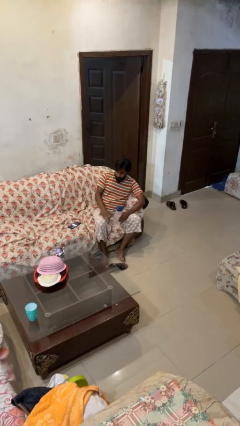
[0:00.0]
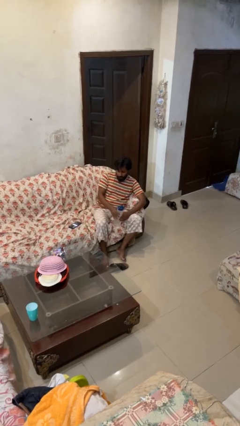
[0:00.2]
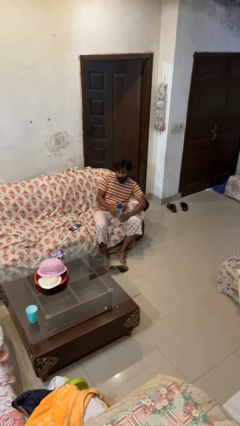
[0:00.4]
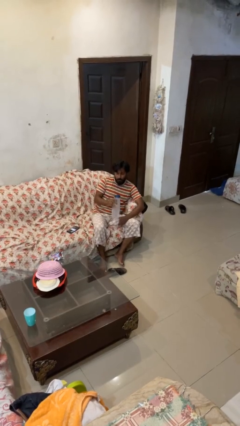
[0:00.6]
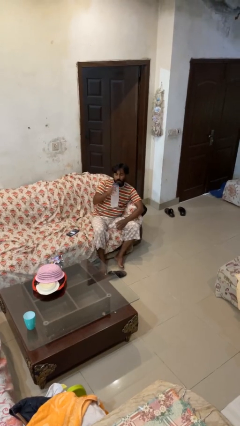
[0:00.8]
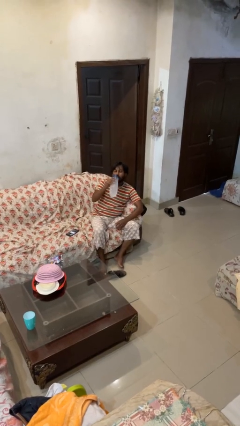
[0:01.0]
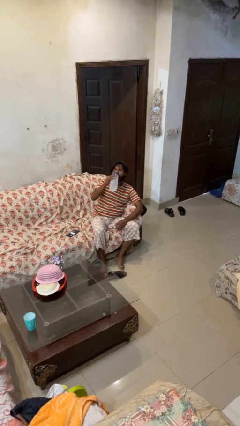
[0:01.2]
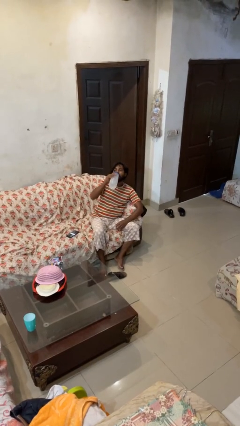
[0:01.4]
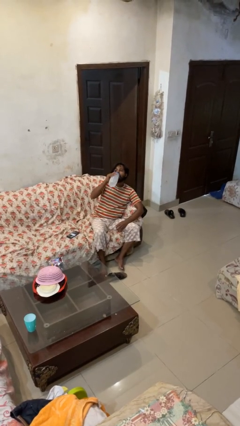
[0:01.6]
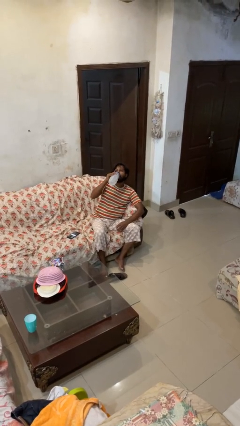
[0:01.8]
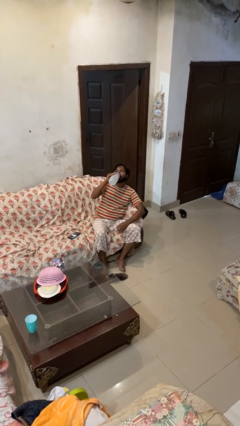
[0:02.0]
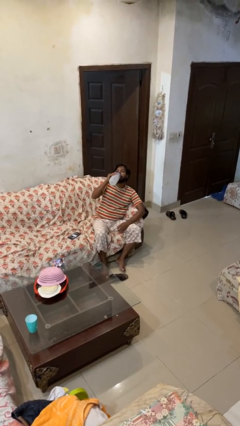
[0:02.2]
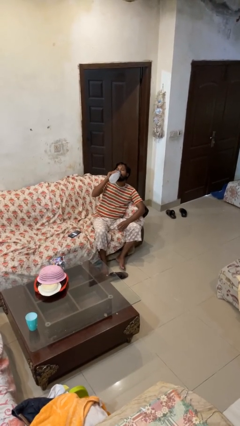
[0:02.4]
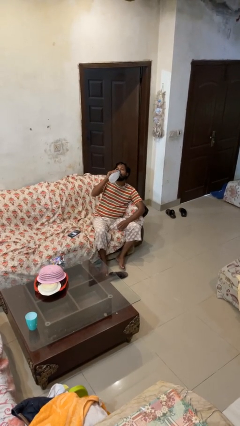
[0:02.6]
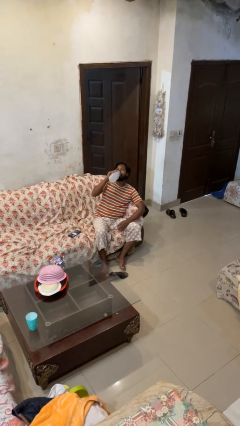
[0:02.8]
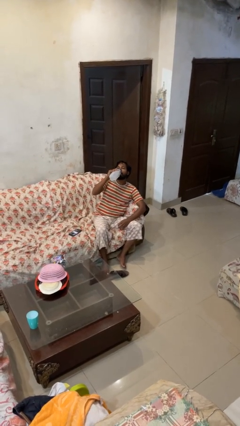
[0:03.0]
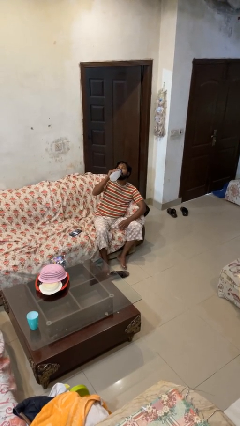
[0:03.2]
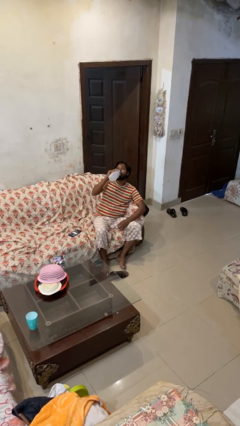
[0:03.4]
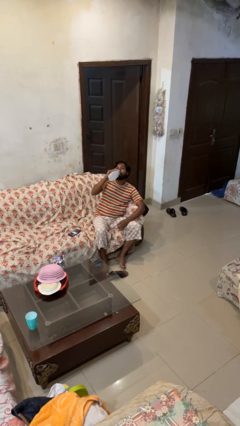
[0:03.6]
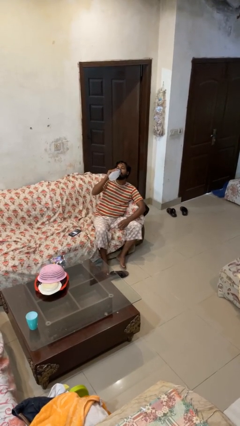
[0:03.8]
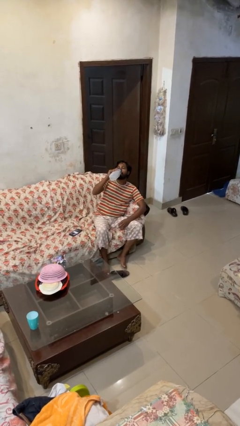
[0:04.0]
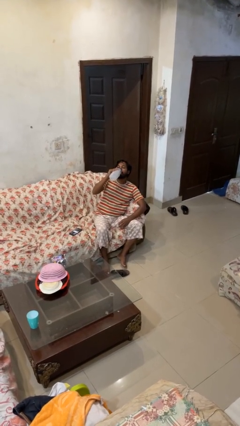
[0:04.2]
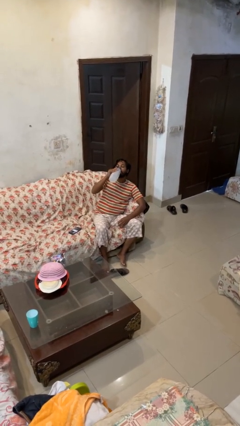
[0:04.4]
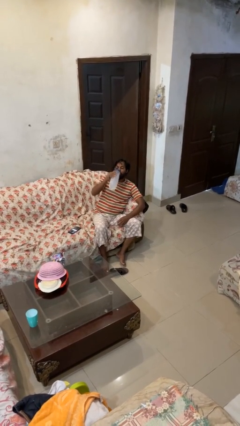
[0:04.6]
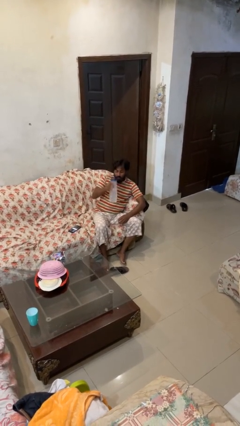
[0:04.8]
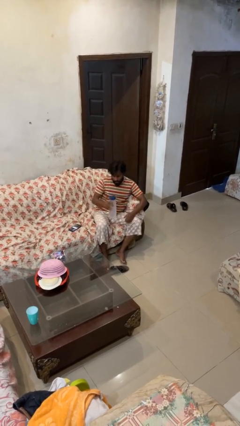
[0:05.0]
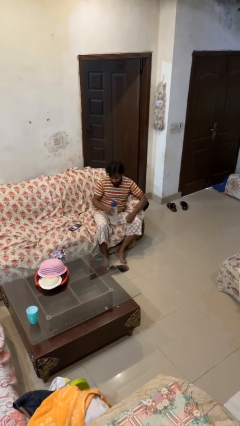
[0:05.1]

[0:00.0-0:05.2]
person drinks from bottle

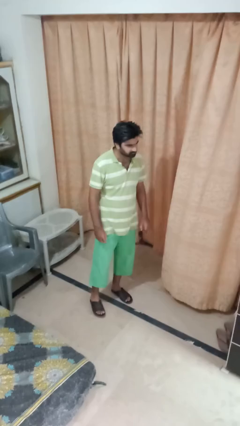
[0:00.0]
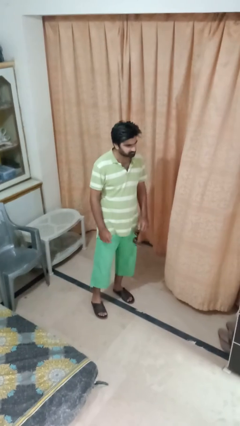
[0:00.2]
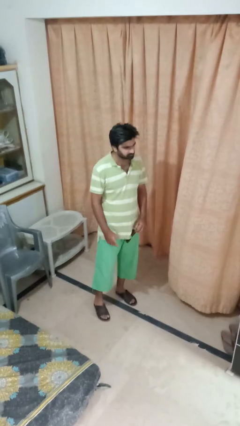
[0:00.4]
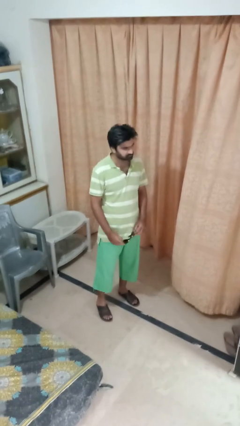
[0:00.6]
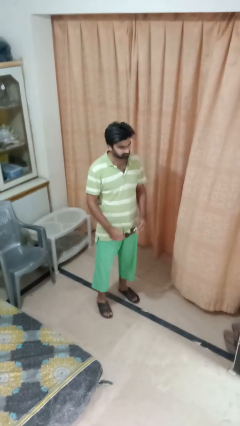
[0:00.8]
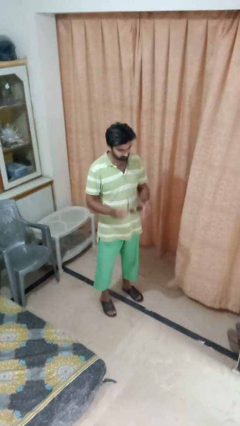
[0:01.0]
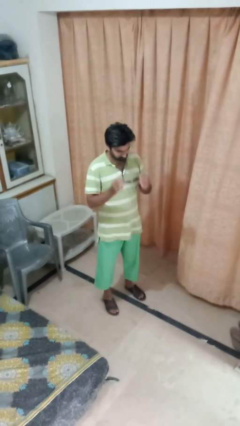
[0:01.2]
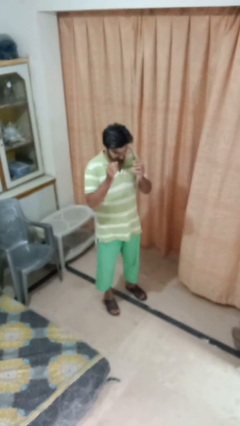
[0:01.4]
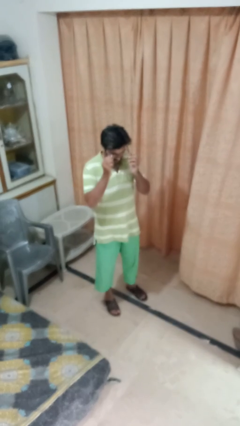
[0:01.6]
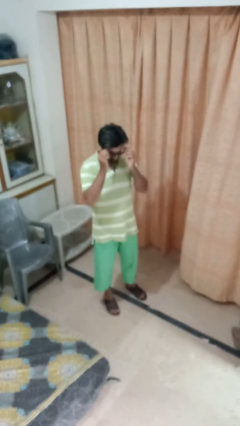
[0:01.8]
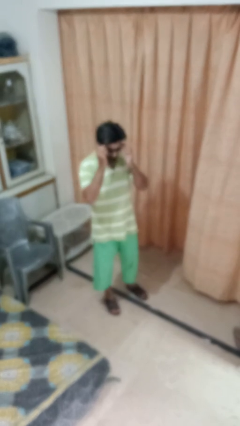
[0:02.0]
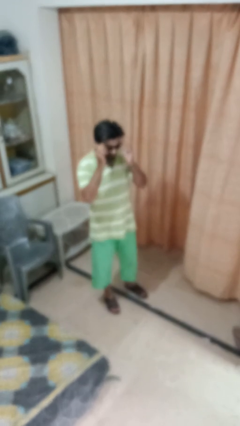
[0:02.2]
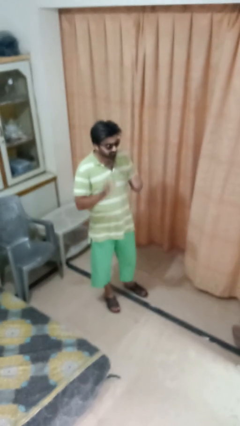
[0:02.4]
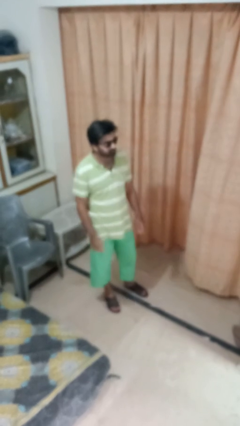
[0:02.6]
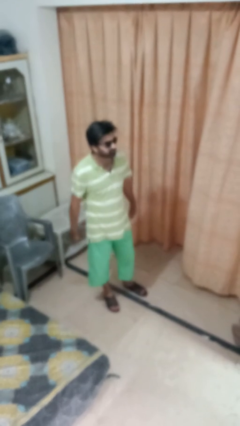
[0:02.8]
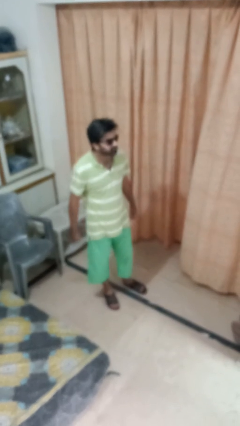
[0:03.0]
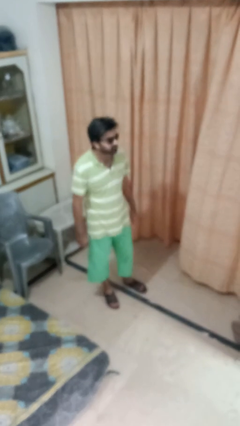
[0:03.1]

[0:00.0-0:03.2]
person puts on sunglasses

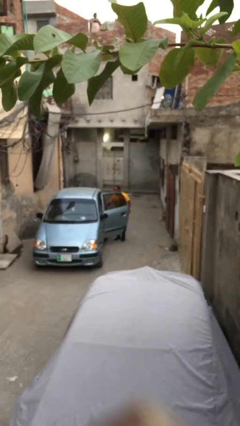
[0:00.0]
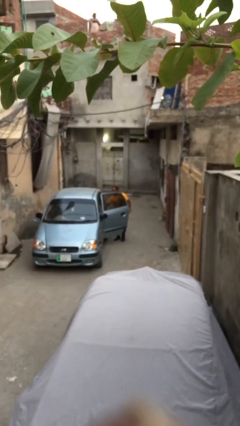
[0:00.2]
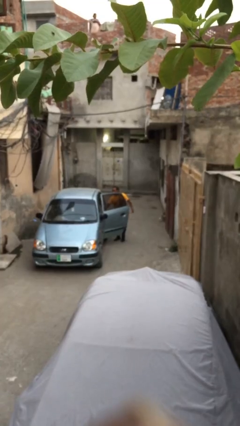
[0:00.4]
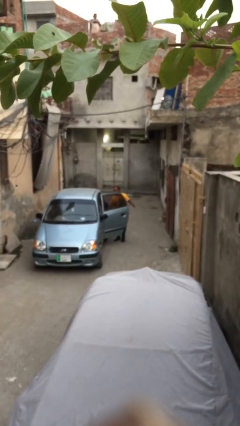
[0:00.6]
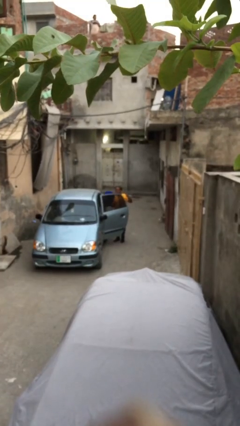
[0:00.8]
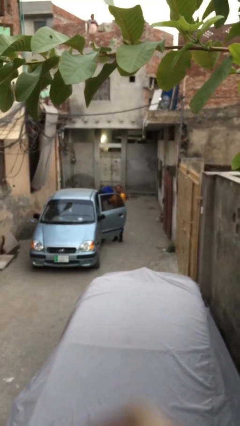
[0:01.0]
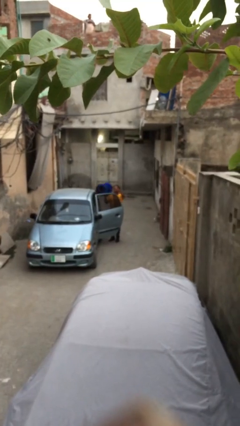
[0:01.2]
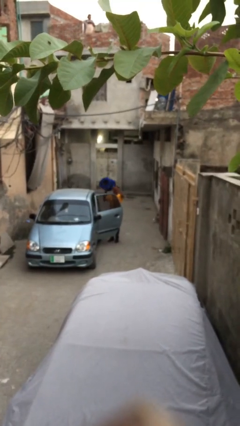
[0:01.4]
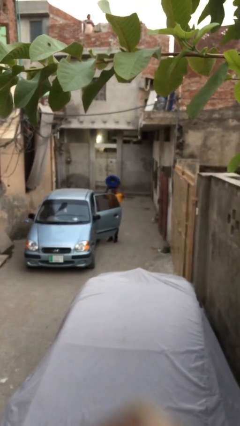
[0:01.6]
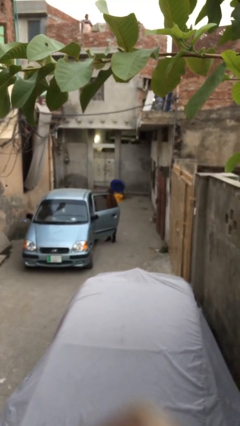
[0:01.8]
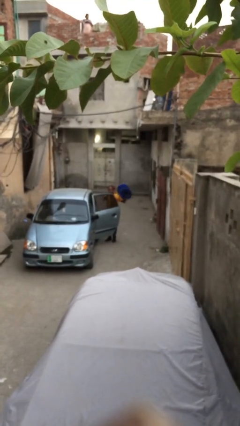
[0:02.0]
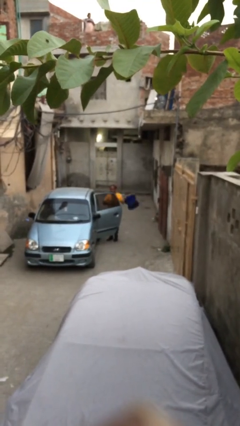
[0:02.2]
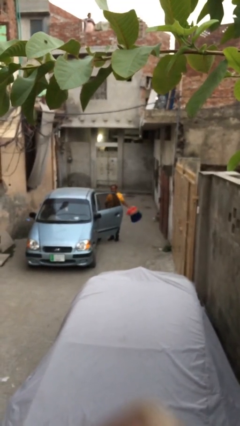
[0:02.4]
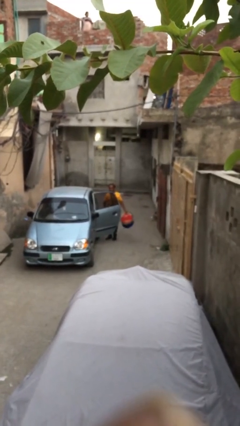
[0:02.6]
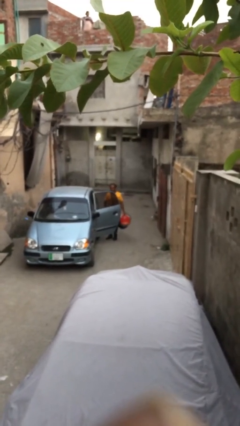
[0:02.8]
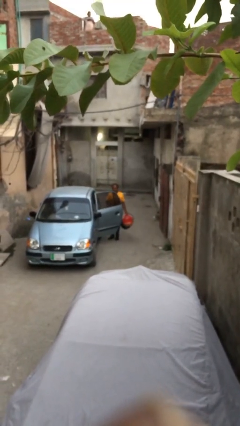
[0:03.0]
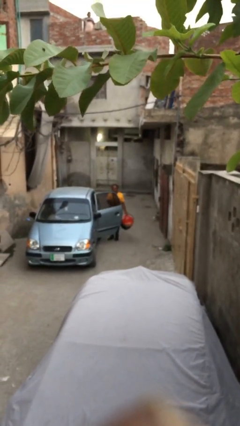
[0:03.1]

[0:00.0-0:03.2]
person unloads car

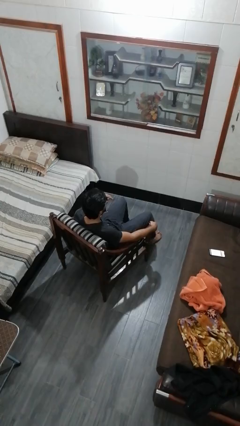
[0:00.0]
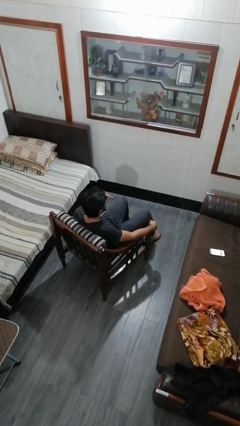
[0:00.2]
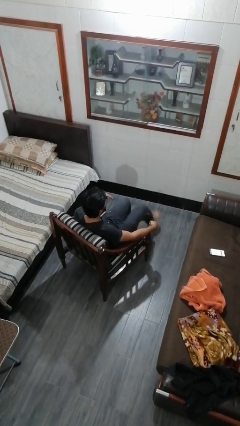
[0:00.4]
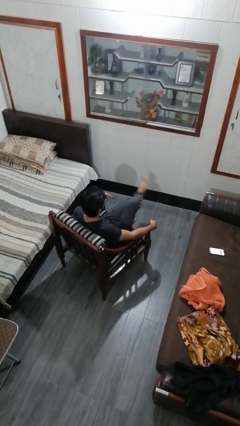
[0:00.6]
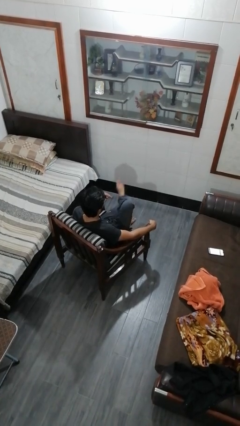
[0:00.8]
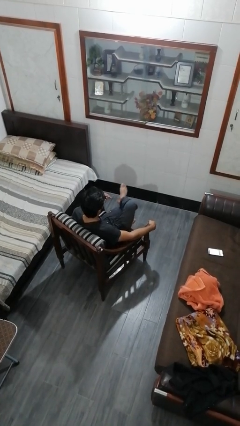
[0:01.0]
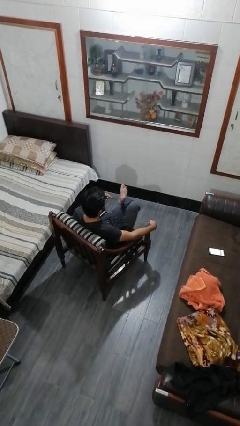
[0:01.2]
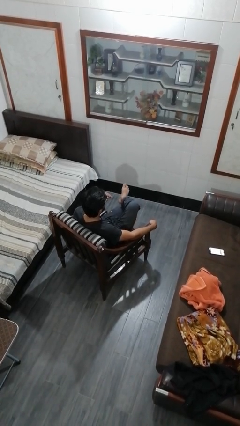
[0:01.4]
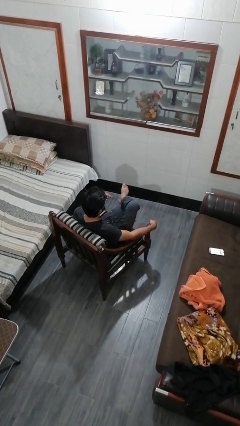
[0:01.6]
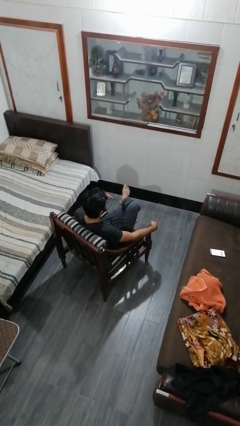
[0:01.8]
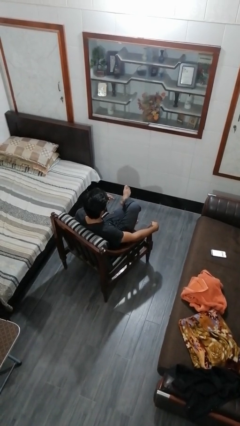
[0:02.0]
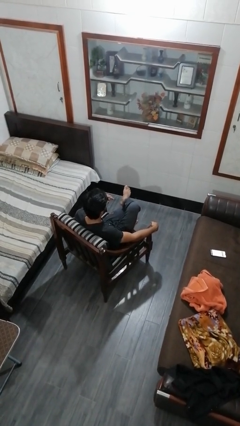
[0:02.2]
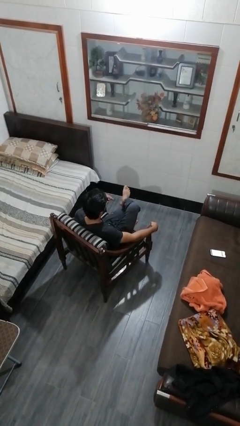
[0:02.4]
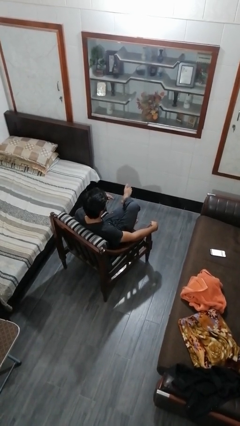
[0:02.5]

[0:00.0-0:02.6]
person crosses legs

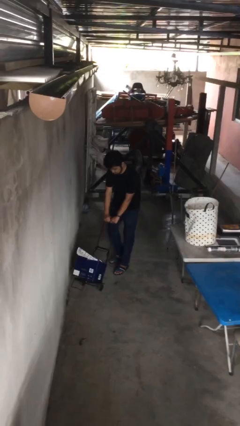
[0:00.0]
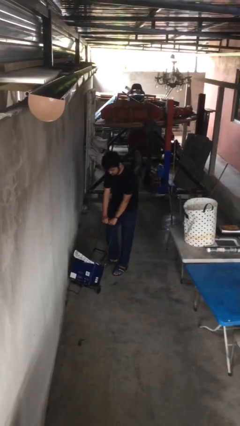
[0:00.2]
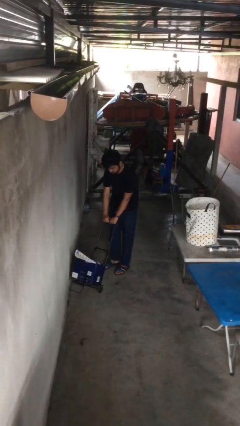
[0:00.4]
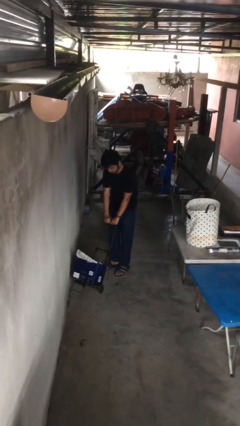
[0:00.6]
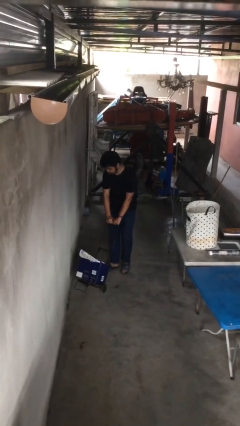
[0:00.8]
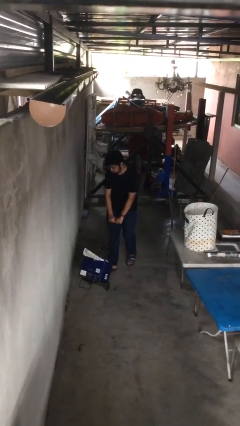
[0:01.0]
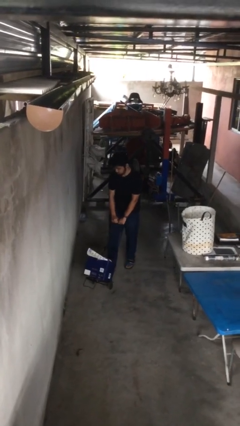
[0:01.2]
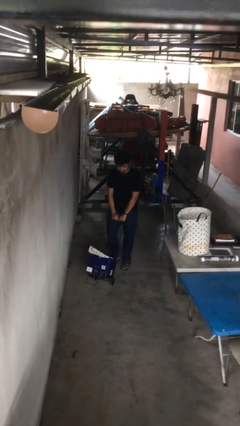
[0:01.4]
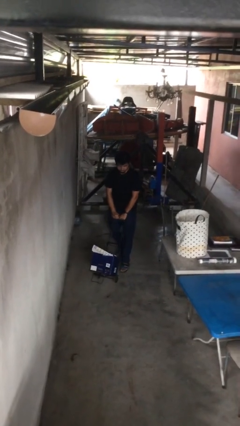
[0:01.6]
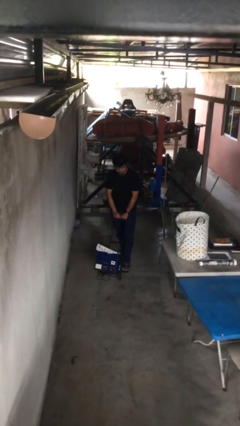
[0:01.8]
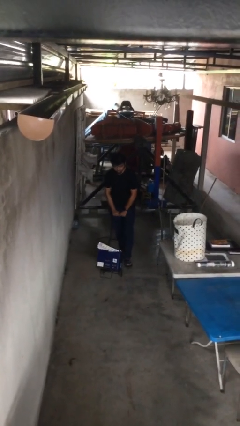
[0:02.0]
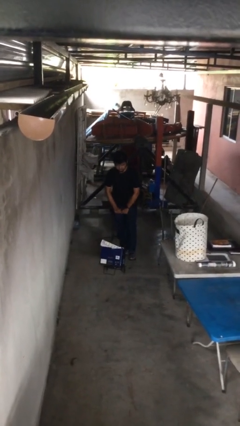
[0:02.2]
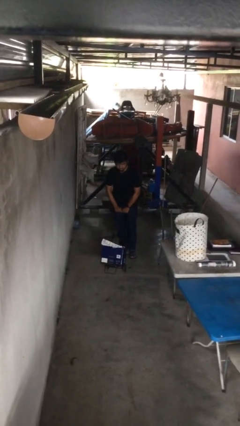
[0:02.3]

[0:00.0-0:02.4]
person pulls wheeled cart

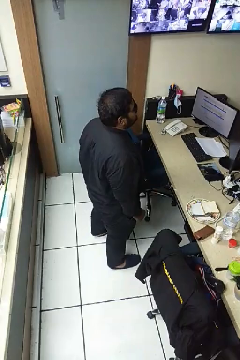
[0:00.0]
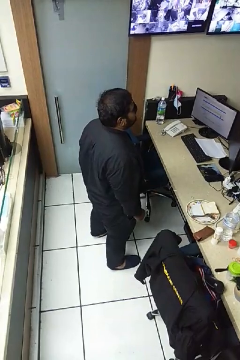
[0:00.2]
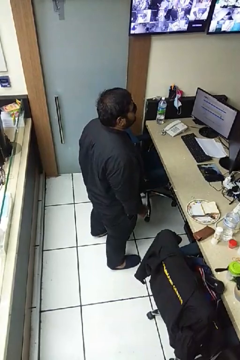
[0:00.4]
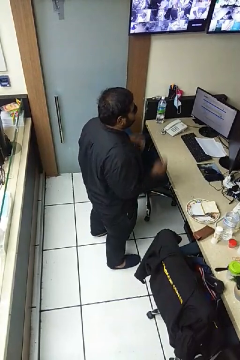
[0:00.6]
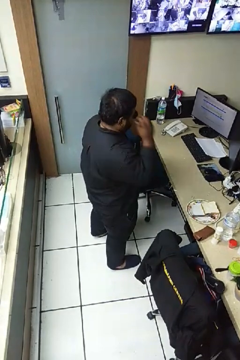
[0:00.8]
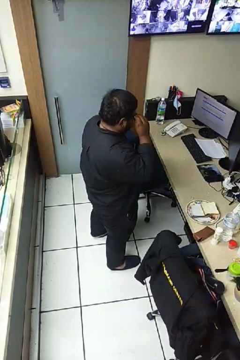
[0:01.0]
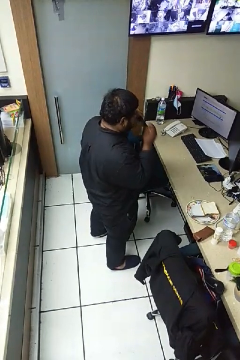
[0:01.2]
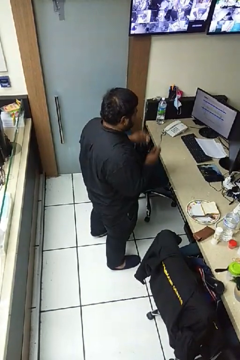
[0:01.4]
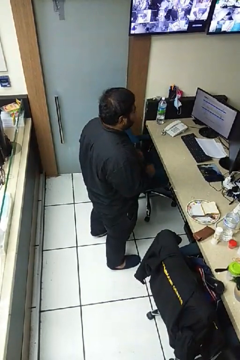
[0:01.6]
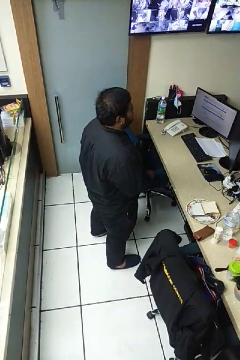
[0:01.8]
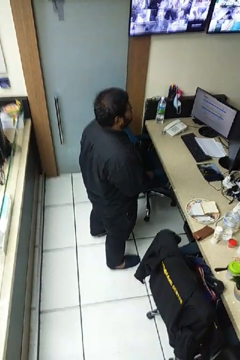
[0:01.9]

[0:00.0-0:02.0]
person takes off sunglasses
